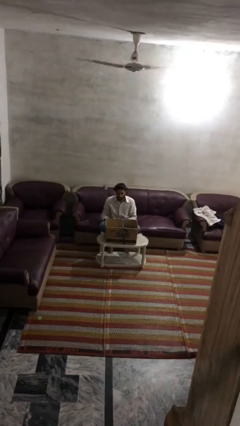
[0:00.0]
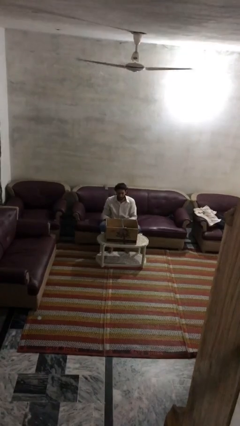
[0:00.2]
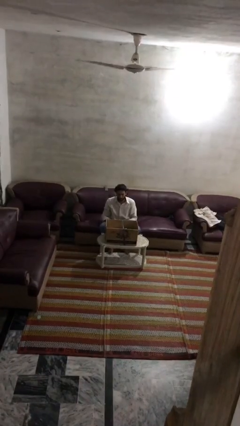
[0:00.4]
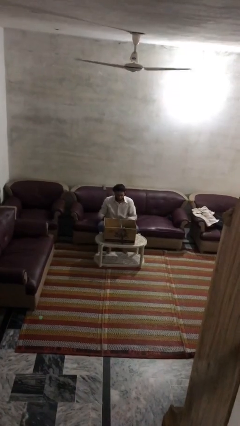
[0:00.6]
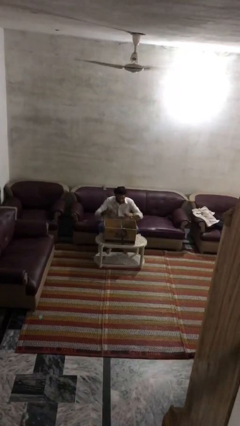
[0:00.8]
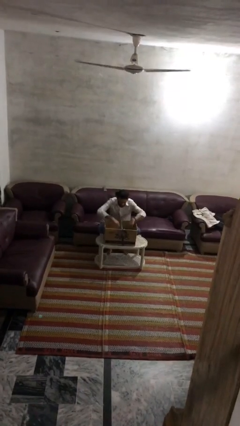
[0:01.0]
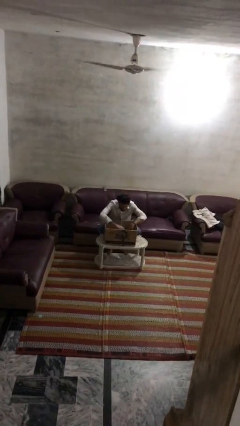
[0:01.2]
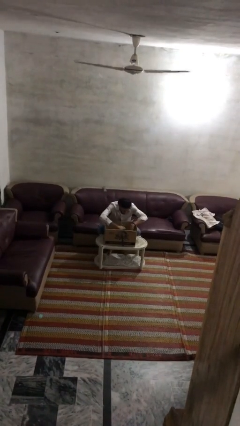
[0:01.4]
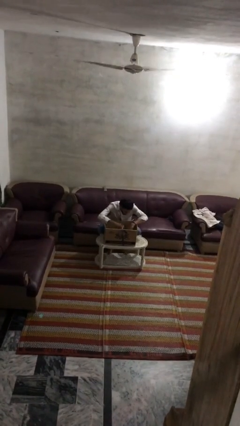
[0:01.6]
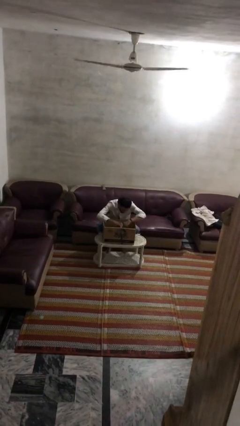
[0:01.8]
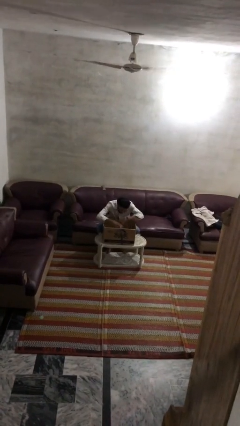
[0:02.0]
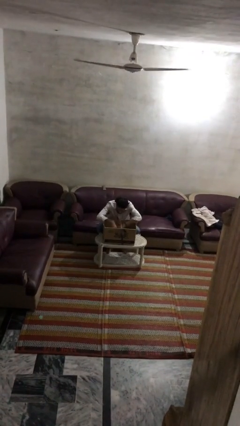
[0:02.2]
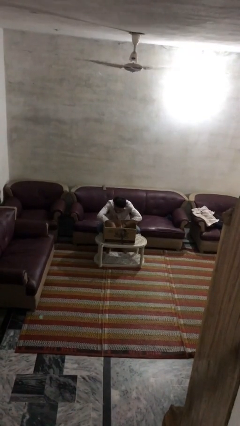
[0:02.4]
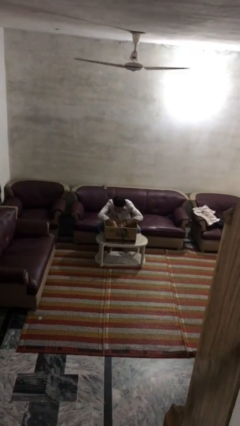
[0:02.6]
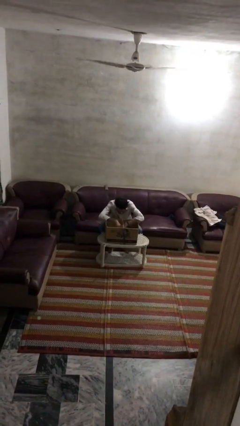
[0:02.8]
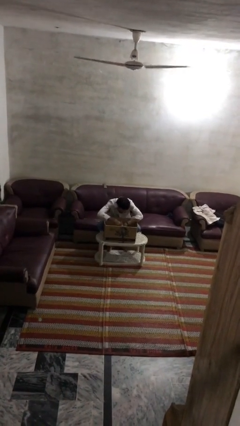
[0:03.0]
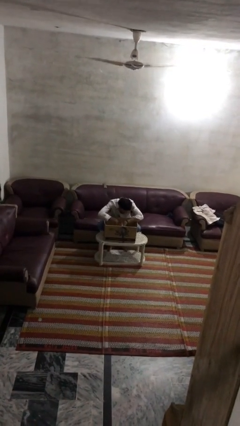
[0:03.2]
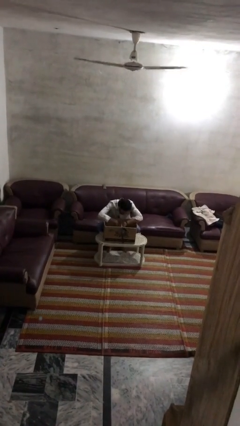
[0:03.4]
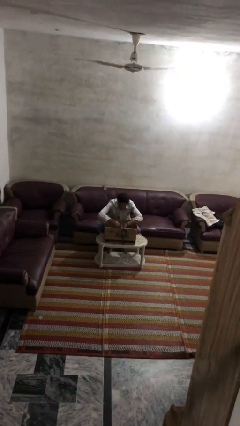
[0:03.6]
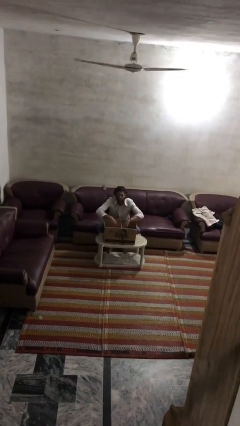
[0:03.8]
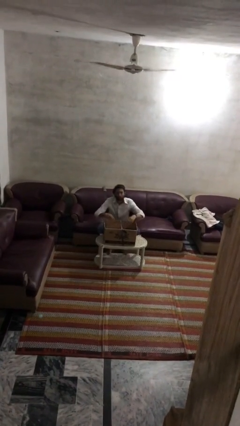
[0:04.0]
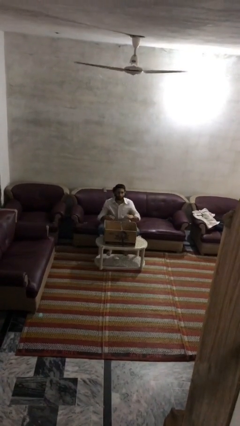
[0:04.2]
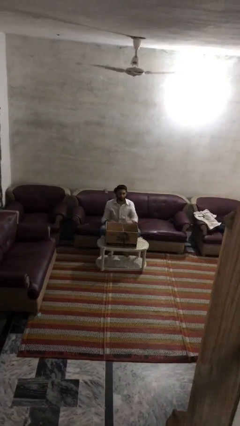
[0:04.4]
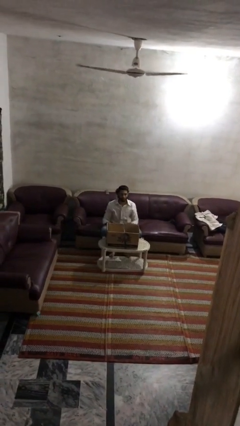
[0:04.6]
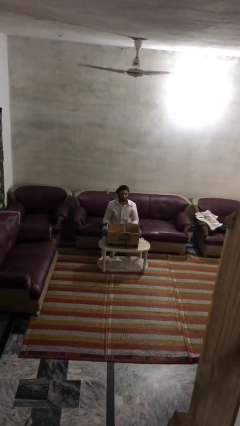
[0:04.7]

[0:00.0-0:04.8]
person searches in box

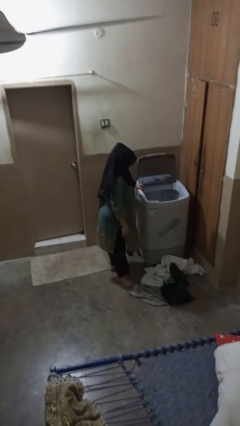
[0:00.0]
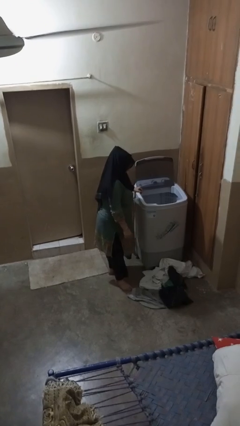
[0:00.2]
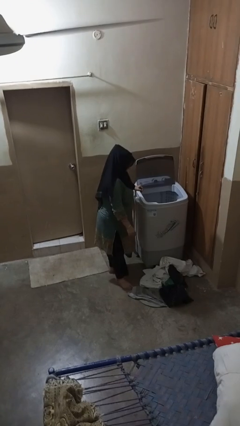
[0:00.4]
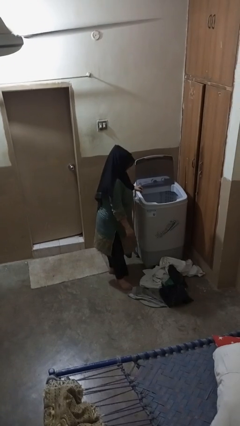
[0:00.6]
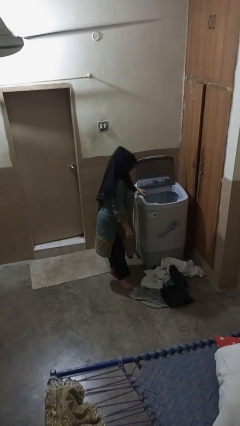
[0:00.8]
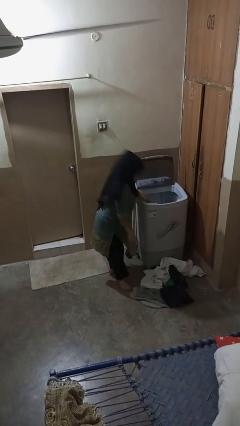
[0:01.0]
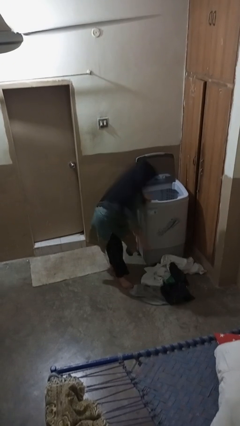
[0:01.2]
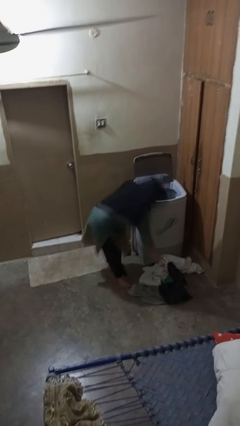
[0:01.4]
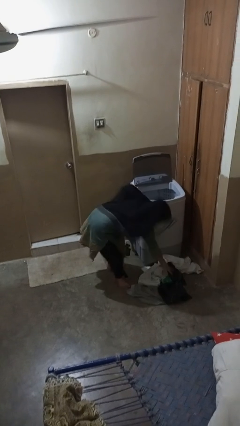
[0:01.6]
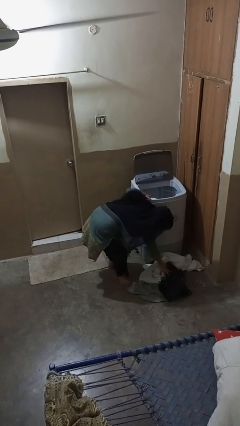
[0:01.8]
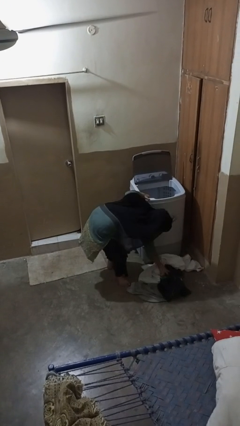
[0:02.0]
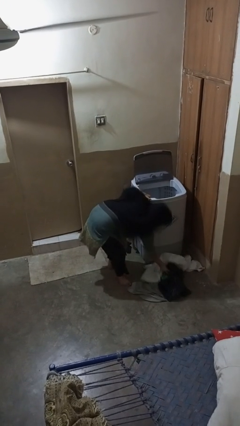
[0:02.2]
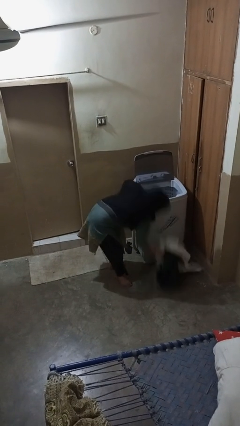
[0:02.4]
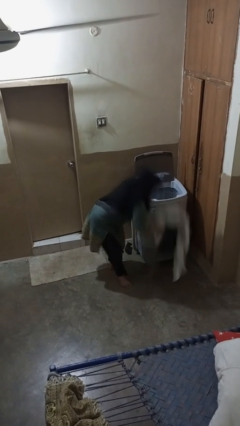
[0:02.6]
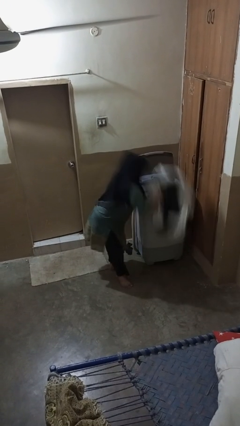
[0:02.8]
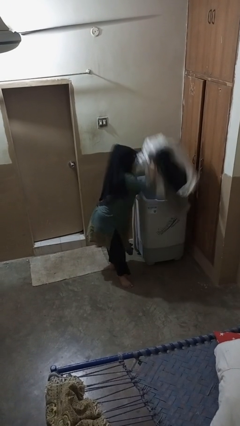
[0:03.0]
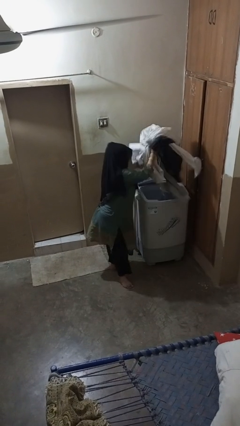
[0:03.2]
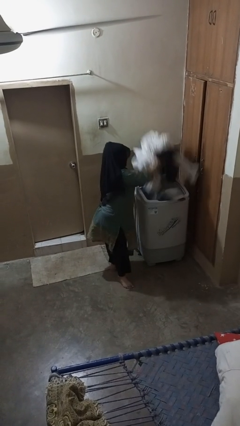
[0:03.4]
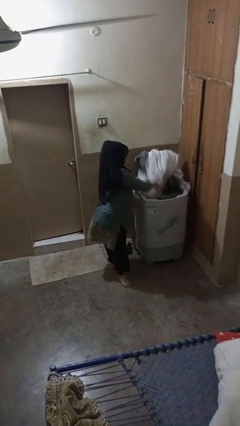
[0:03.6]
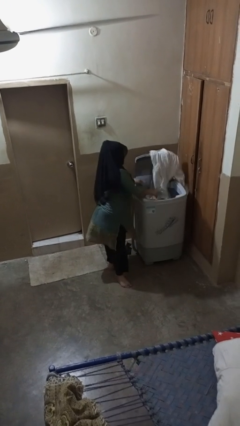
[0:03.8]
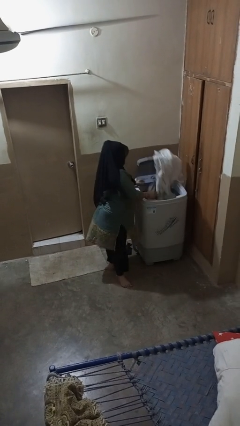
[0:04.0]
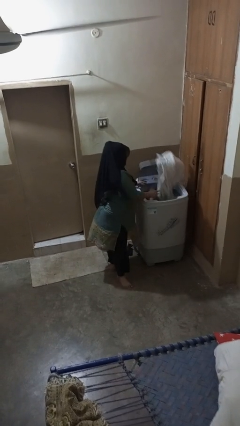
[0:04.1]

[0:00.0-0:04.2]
person loads clotheswasher

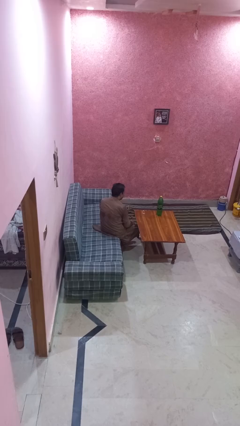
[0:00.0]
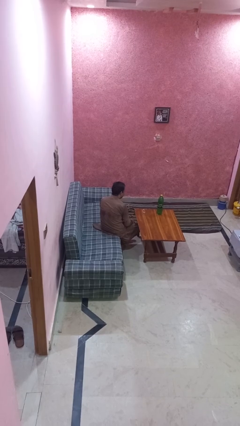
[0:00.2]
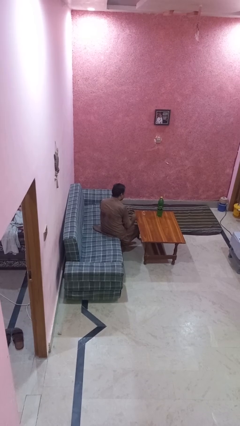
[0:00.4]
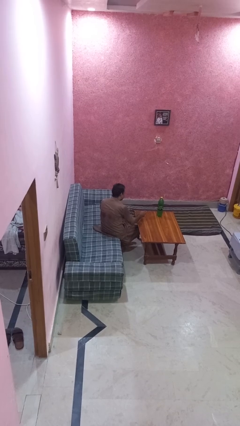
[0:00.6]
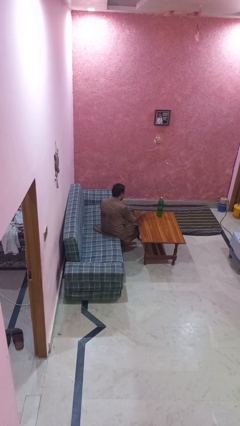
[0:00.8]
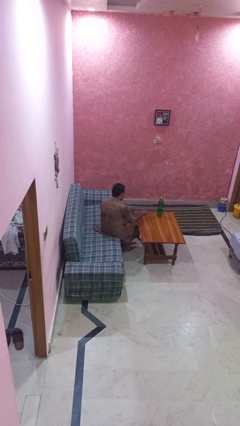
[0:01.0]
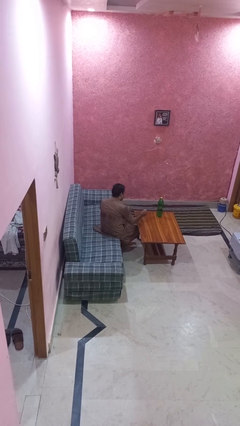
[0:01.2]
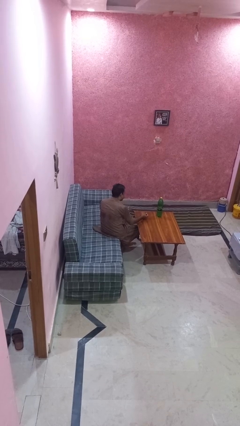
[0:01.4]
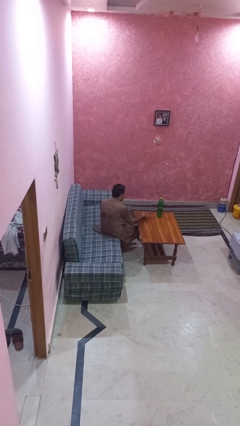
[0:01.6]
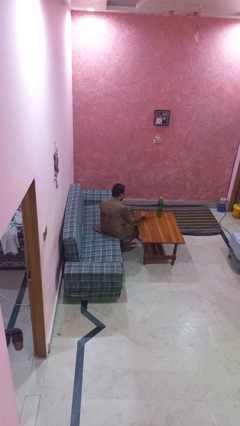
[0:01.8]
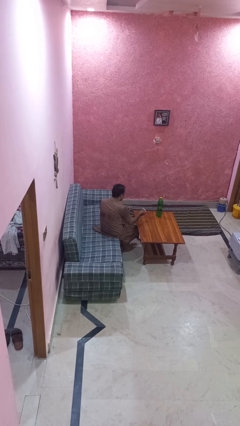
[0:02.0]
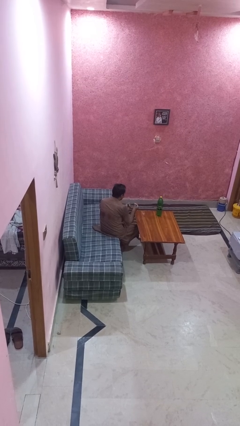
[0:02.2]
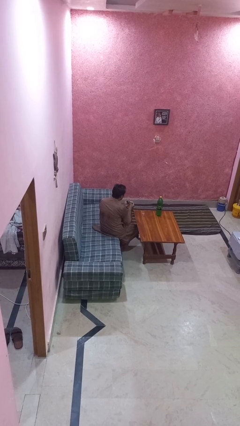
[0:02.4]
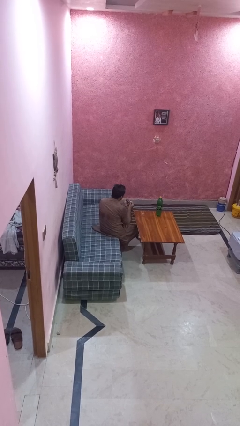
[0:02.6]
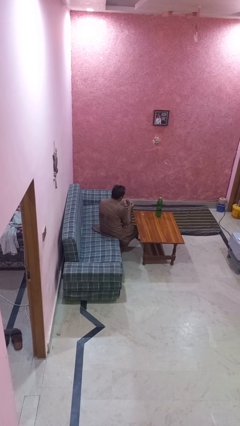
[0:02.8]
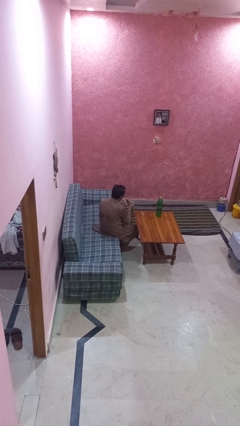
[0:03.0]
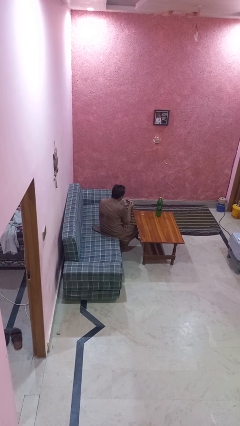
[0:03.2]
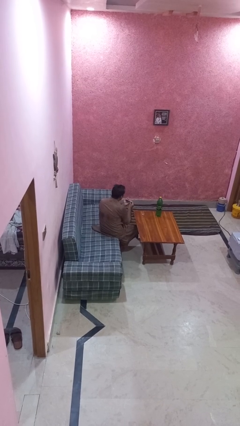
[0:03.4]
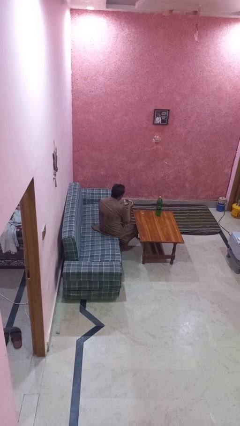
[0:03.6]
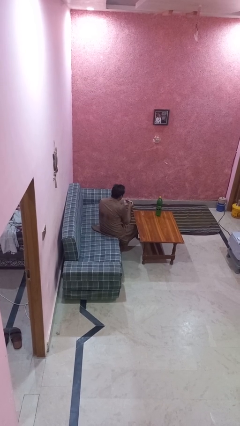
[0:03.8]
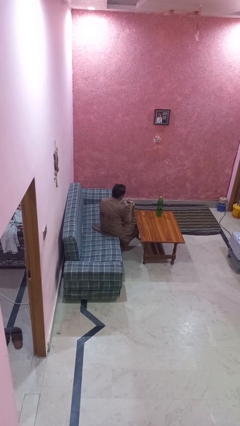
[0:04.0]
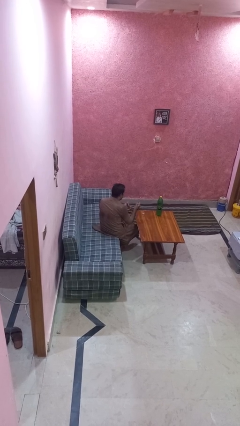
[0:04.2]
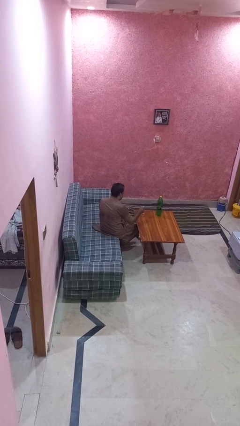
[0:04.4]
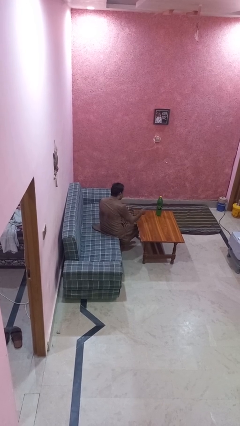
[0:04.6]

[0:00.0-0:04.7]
person paints fingernails

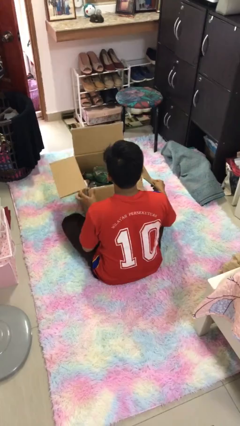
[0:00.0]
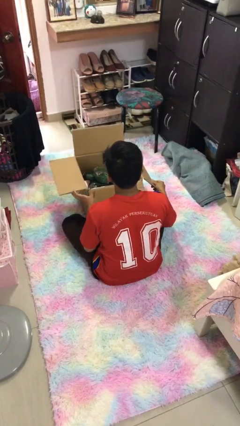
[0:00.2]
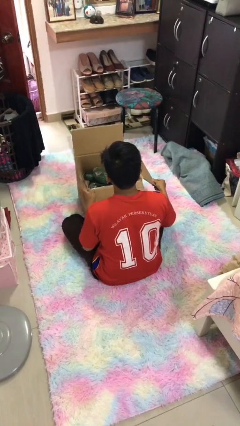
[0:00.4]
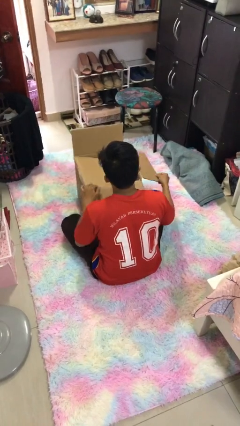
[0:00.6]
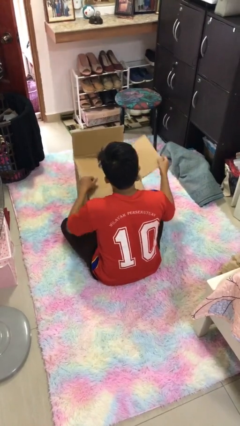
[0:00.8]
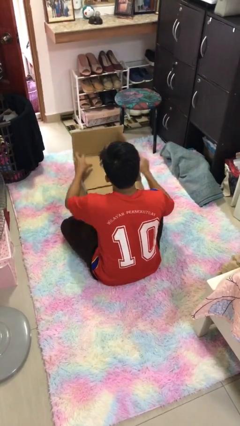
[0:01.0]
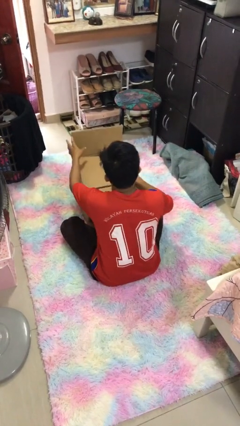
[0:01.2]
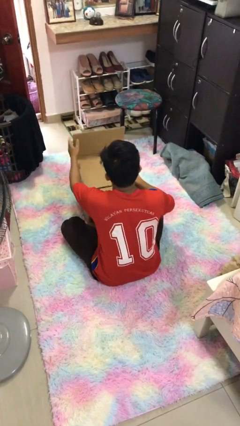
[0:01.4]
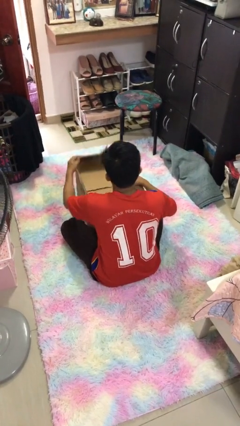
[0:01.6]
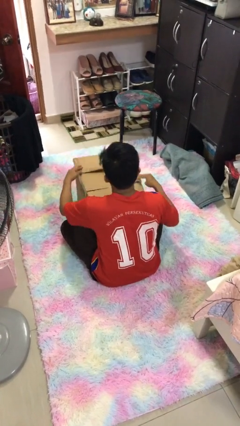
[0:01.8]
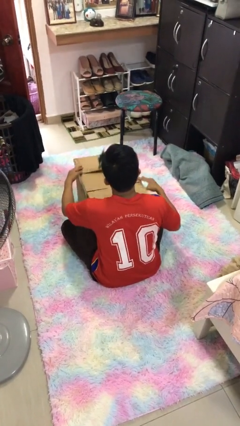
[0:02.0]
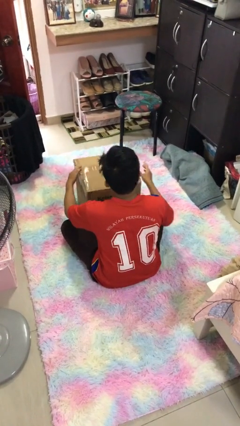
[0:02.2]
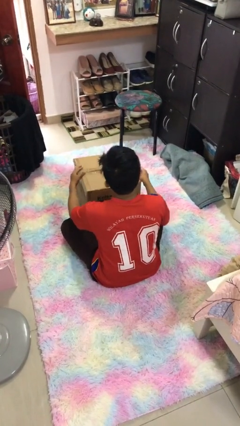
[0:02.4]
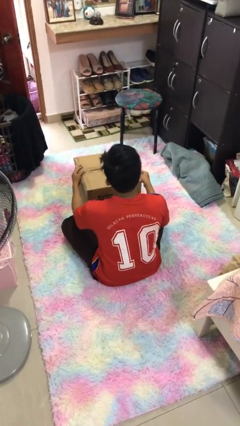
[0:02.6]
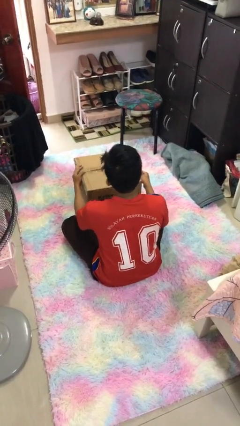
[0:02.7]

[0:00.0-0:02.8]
person closes box

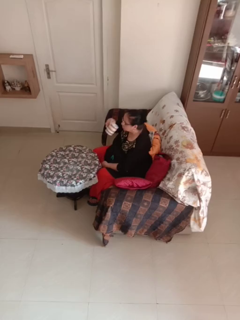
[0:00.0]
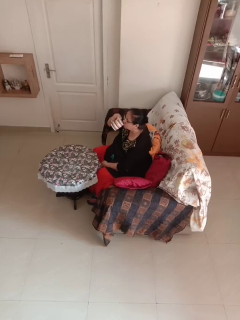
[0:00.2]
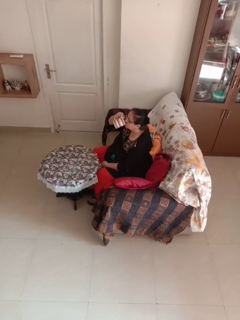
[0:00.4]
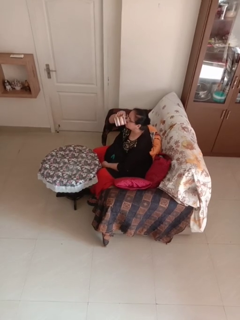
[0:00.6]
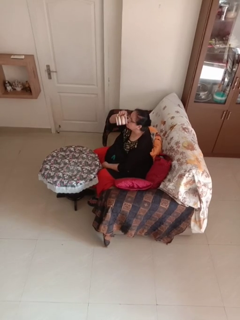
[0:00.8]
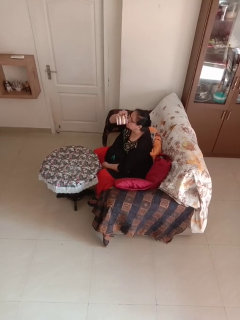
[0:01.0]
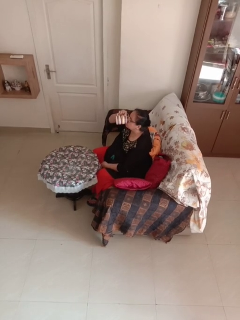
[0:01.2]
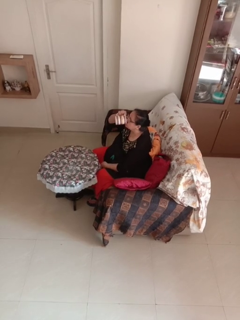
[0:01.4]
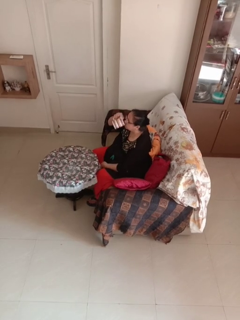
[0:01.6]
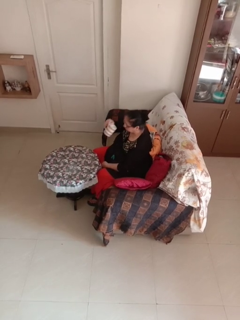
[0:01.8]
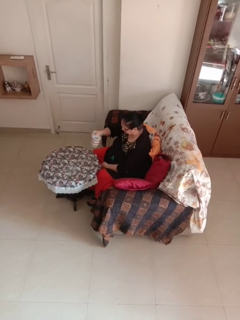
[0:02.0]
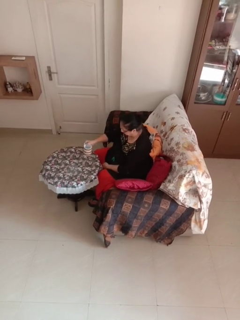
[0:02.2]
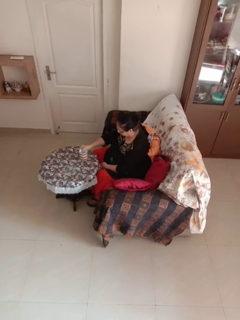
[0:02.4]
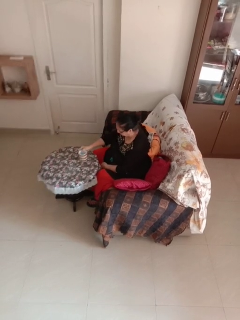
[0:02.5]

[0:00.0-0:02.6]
person drinks from mug
